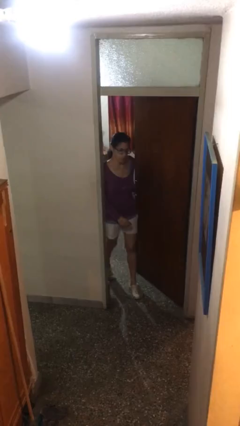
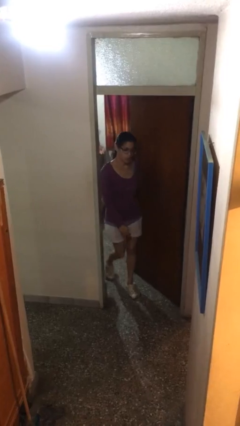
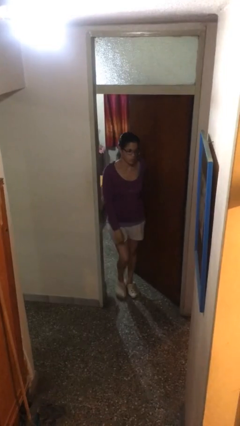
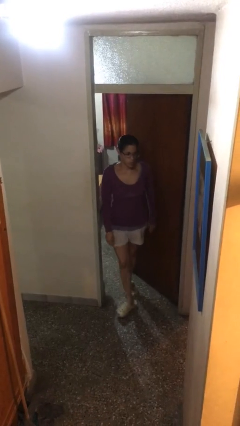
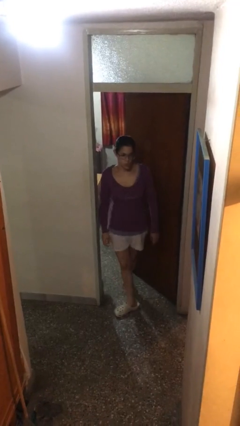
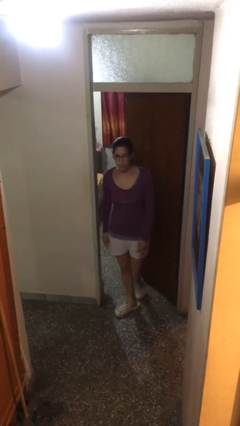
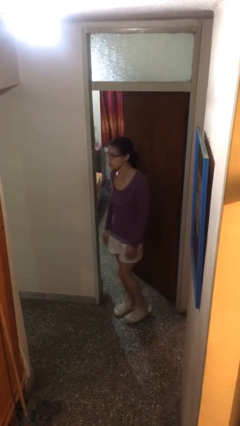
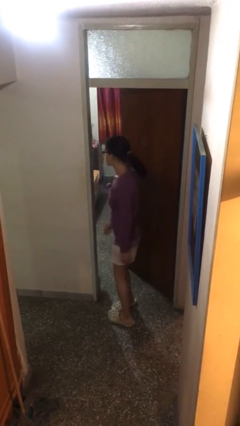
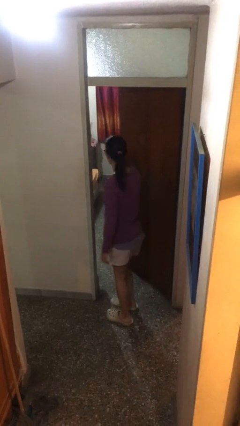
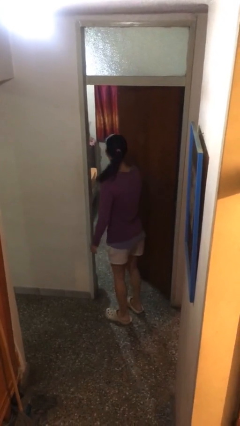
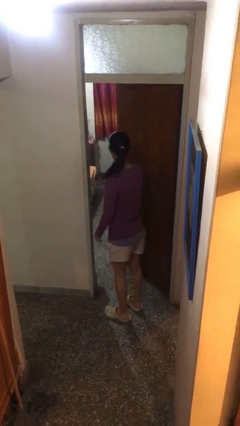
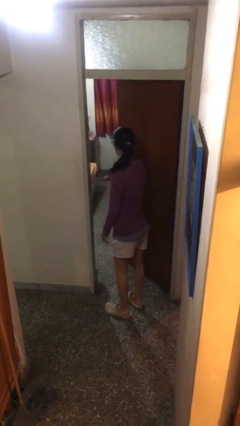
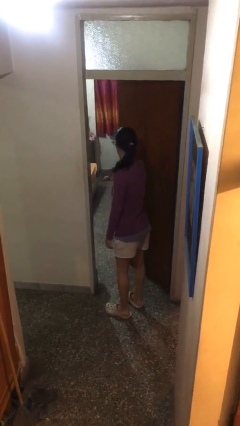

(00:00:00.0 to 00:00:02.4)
person enters scene through structure

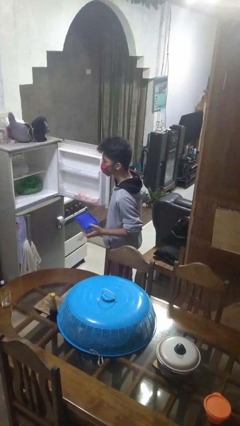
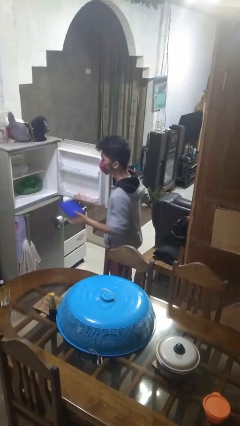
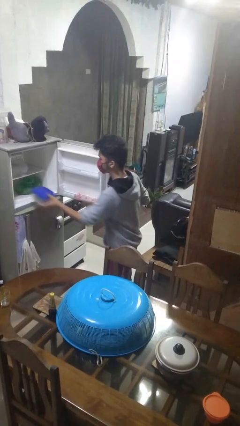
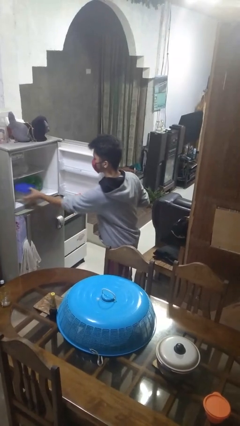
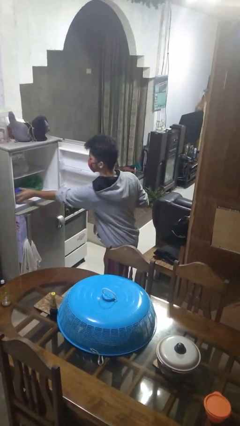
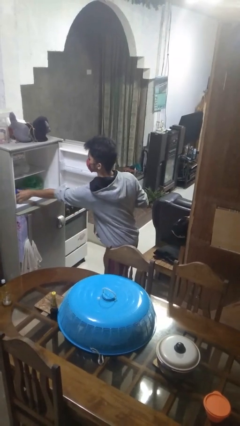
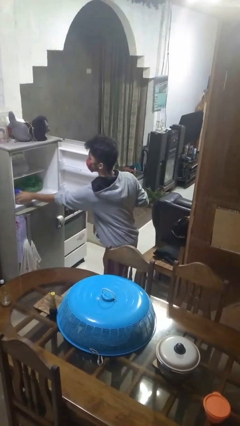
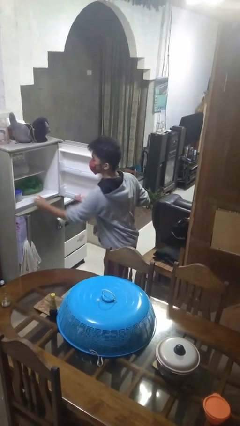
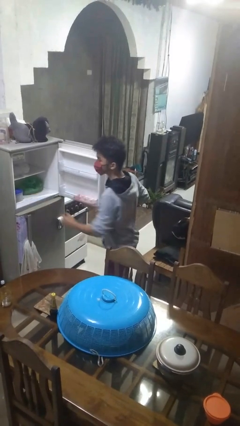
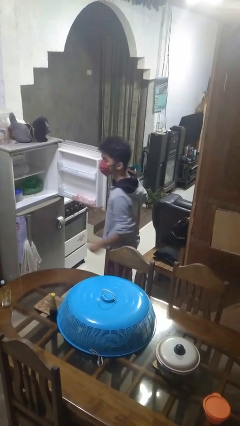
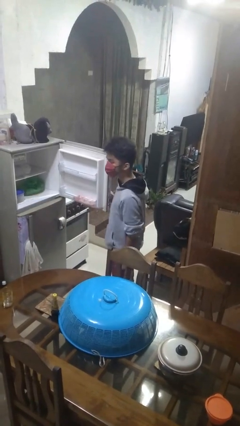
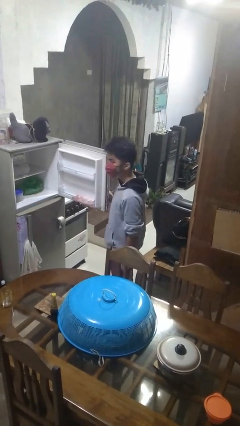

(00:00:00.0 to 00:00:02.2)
person puts object into refrigerator

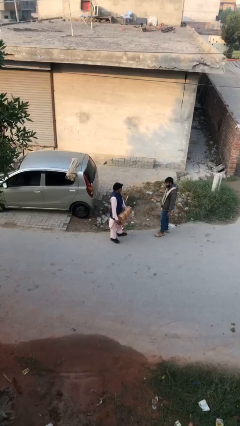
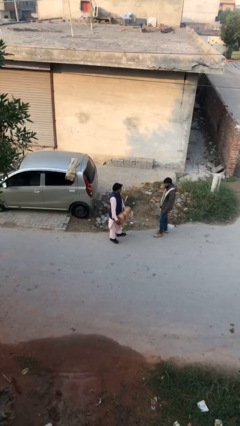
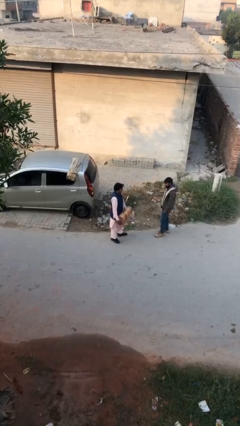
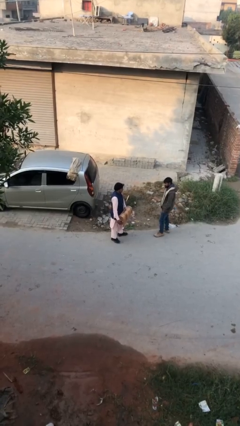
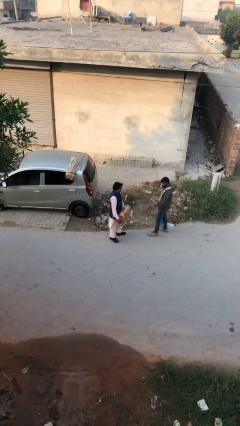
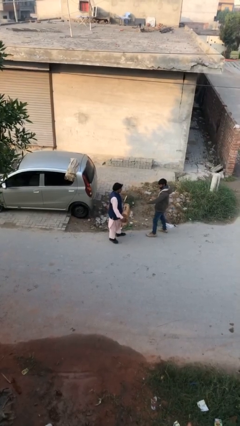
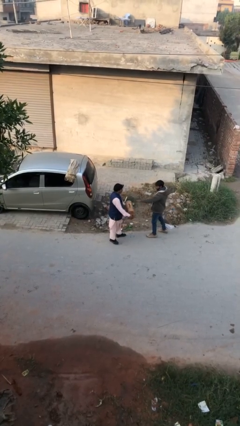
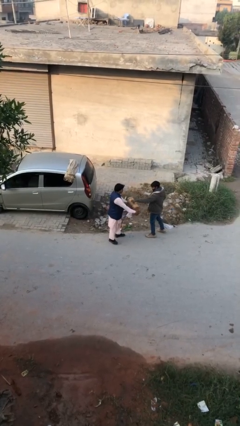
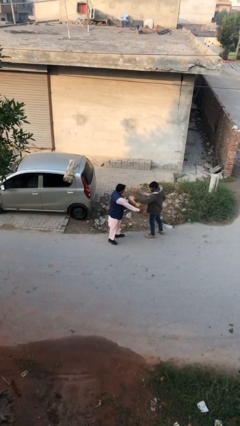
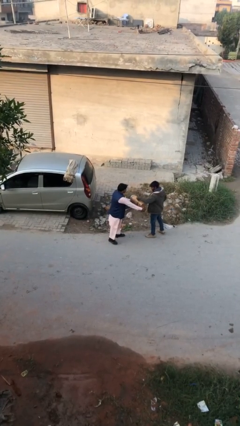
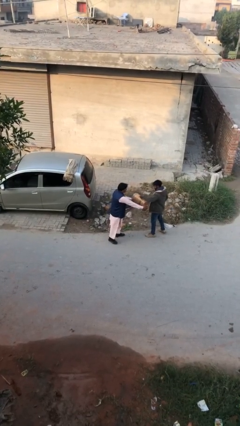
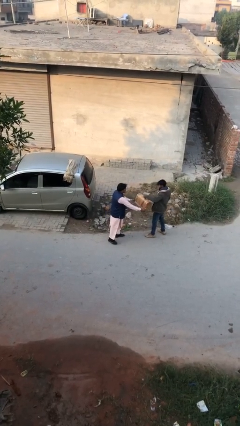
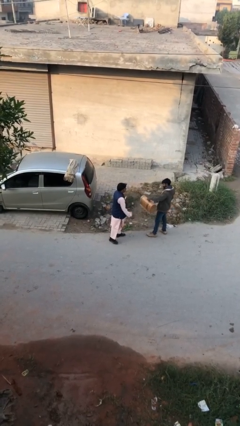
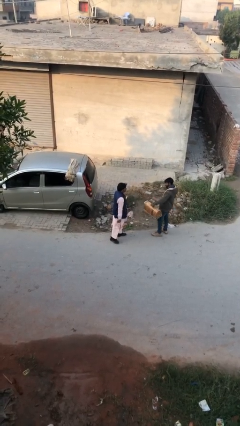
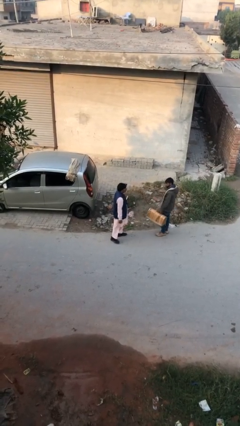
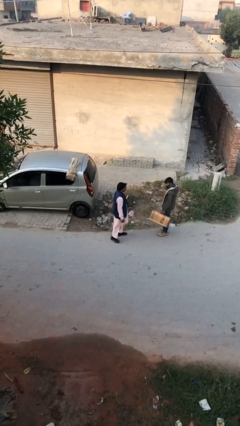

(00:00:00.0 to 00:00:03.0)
person transfers object to person

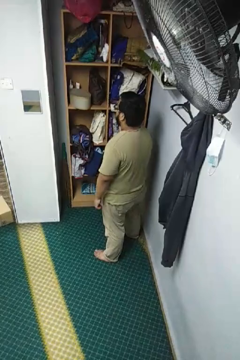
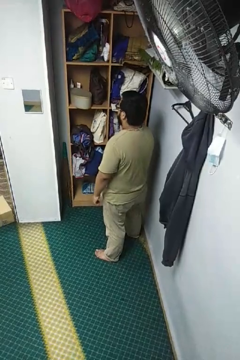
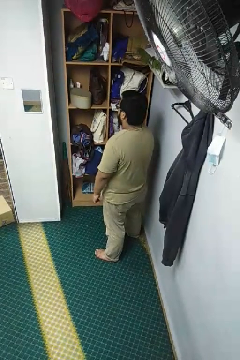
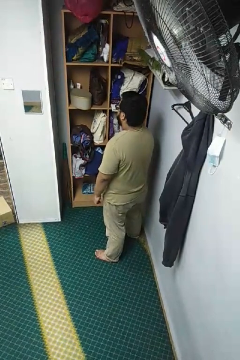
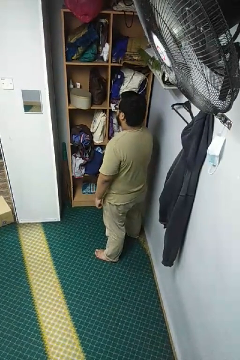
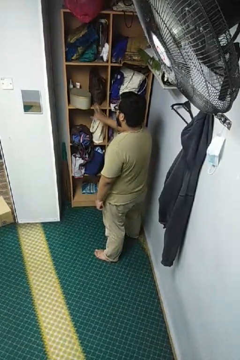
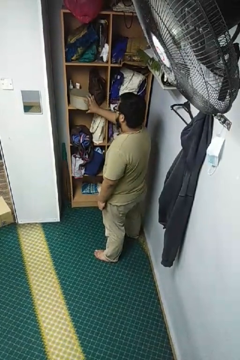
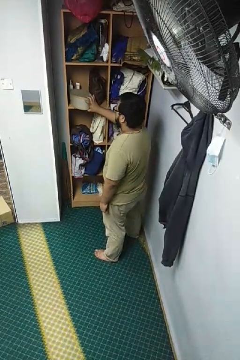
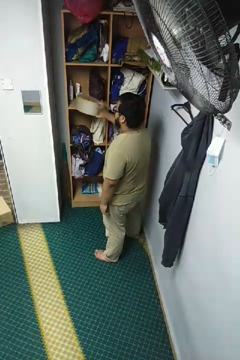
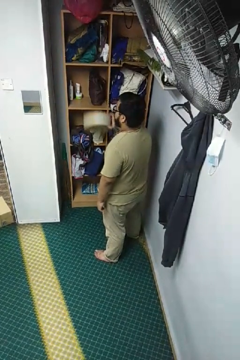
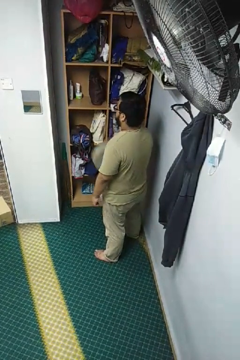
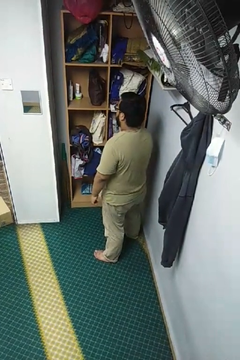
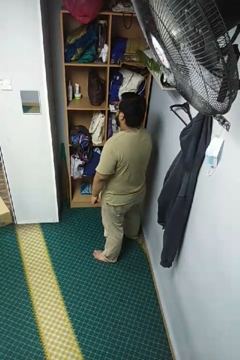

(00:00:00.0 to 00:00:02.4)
person picks up object from cabinet

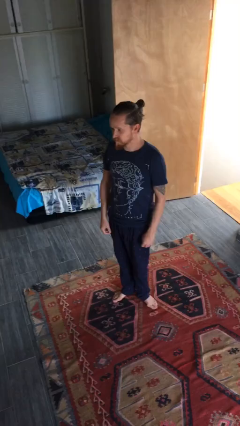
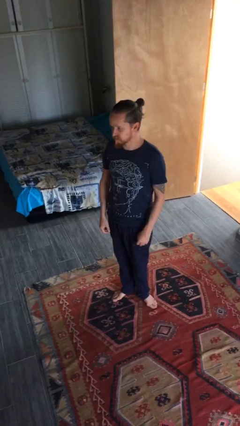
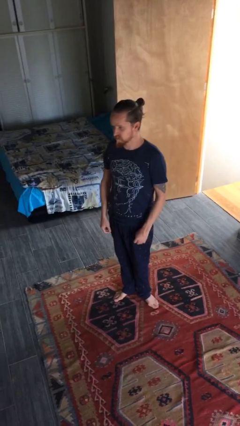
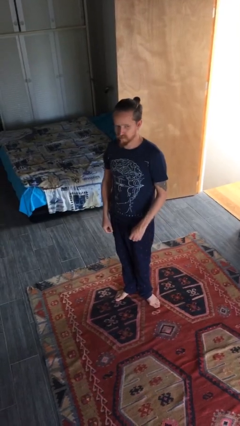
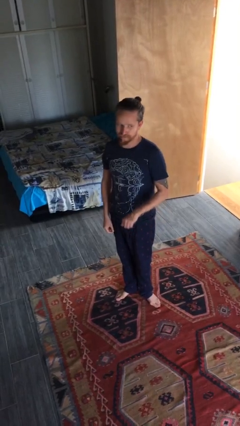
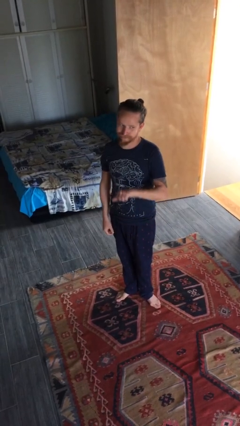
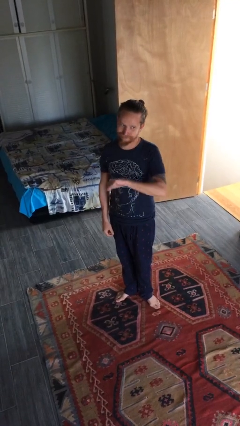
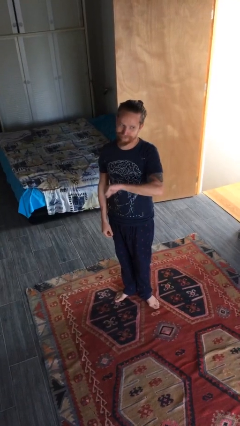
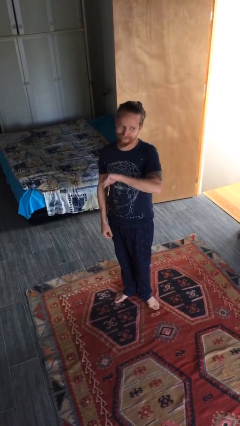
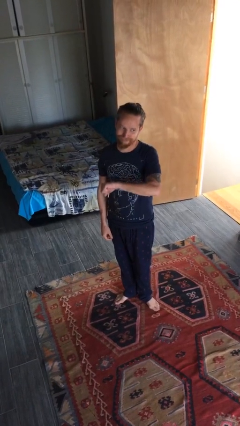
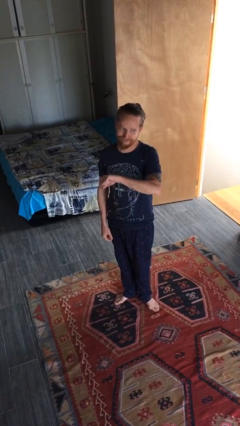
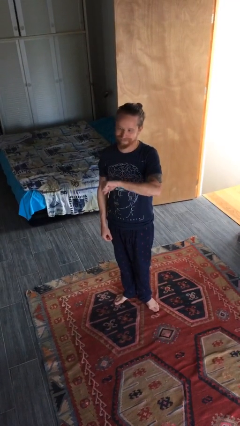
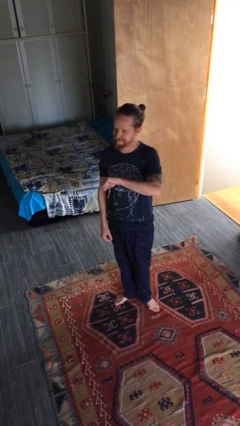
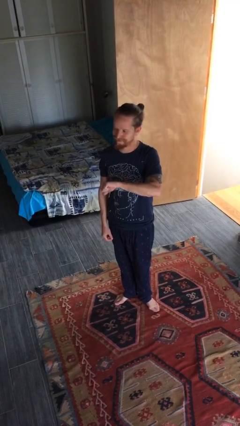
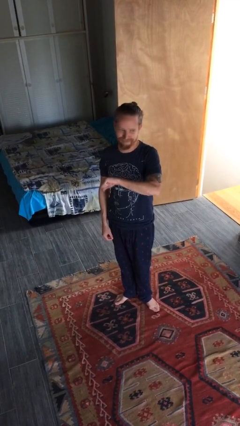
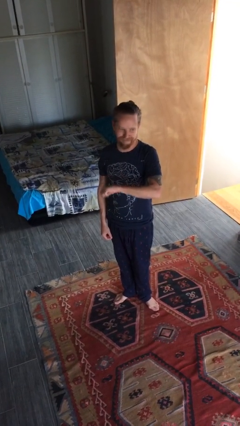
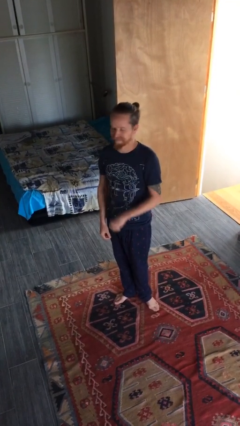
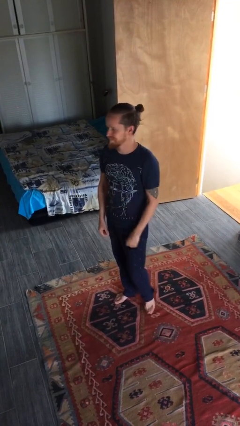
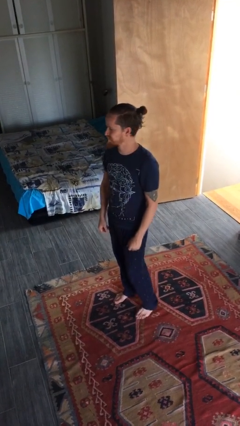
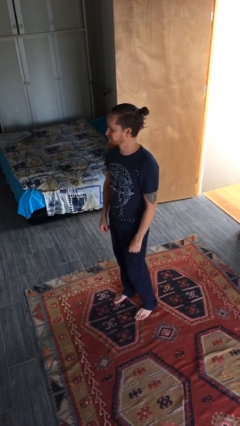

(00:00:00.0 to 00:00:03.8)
person gestures thumbs down

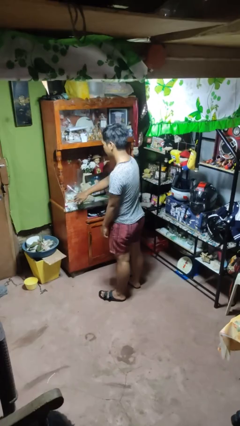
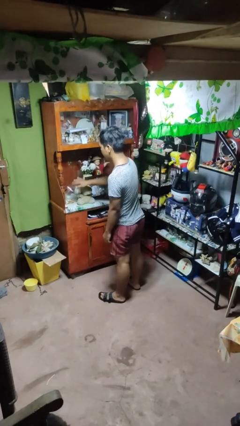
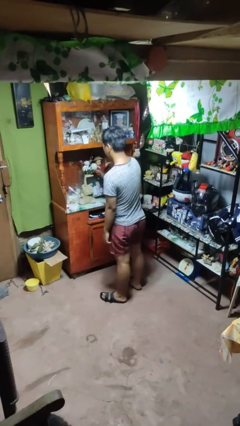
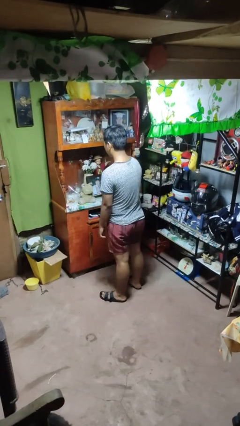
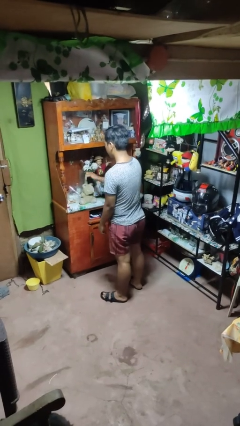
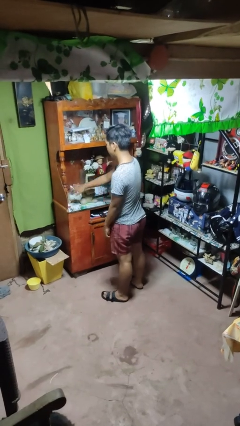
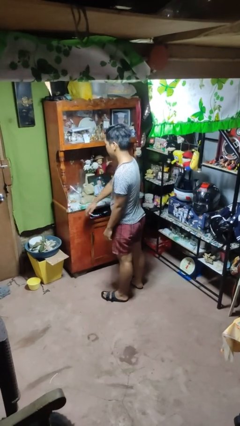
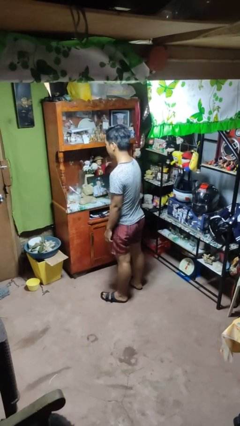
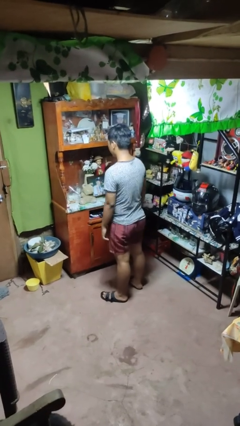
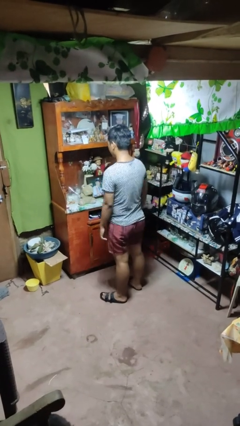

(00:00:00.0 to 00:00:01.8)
person waves hand over object

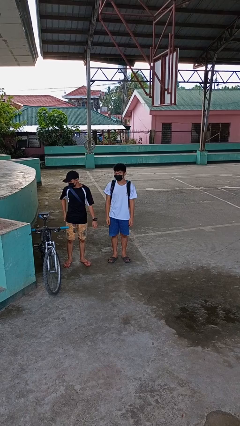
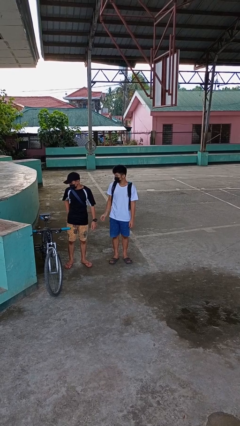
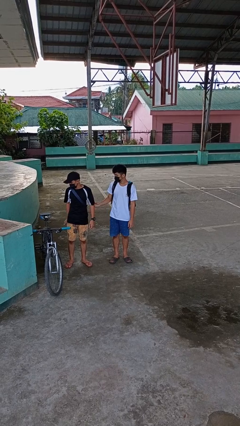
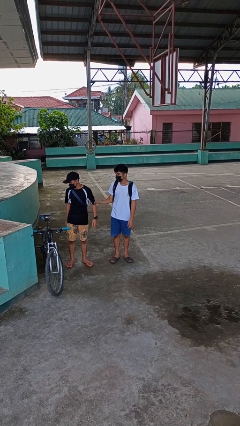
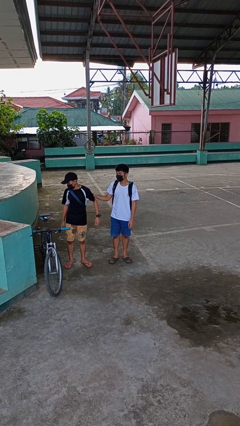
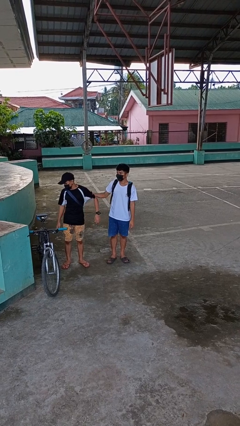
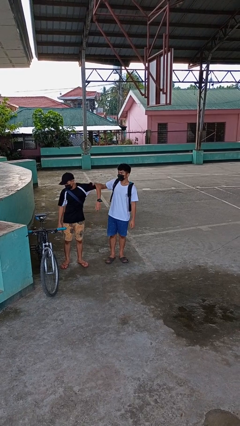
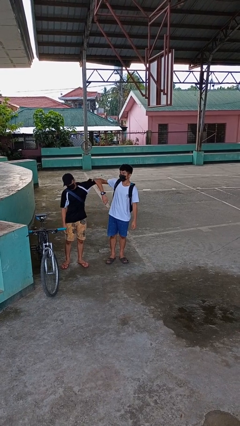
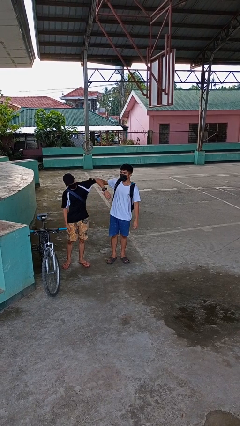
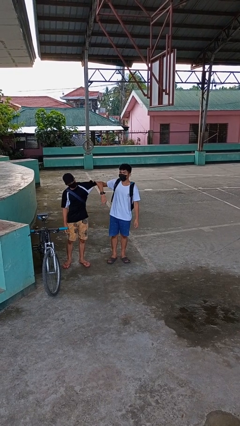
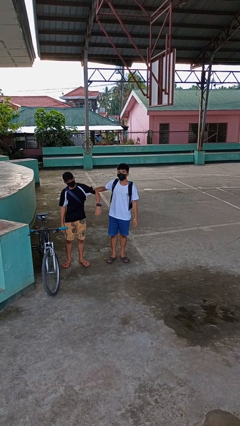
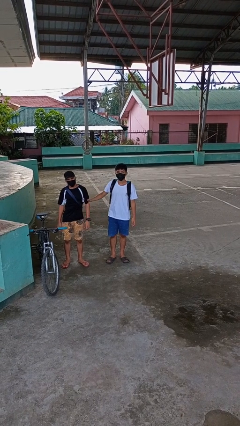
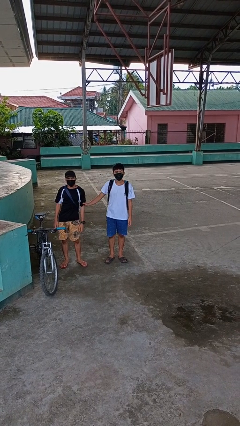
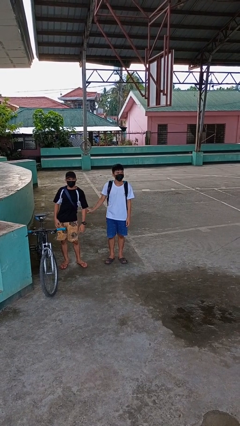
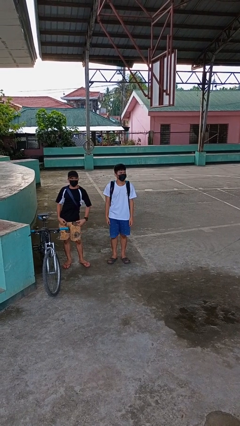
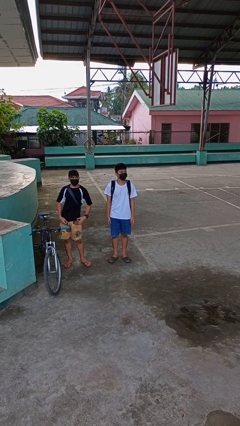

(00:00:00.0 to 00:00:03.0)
person grabs person by bicep
